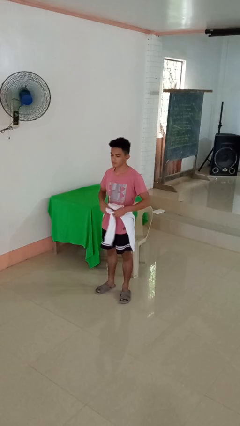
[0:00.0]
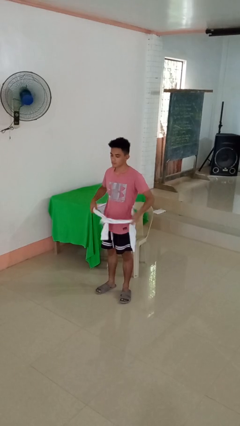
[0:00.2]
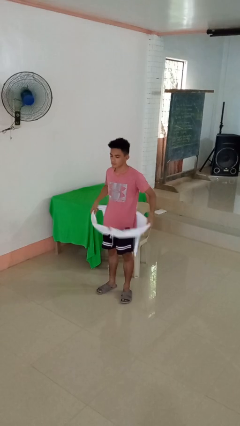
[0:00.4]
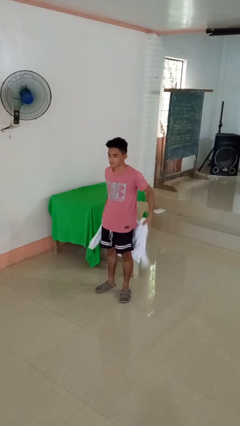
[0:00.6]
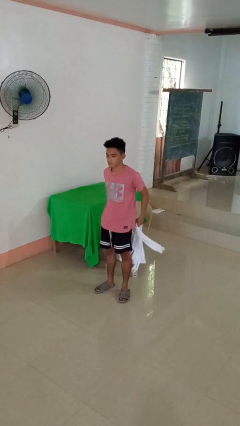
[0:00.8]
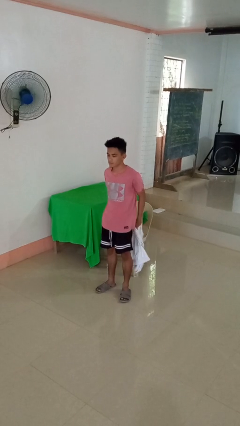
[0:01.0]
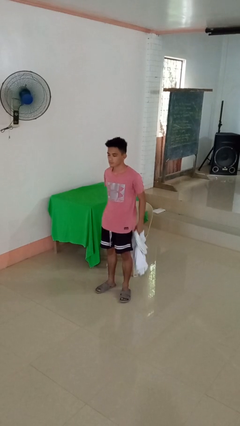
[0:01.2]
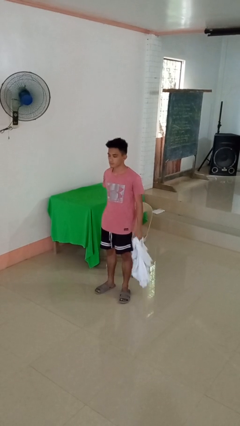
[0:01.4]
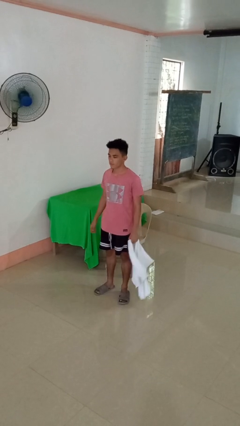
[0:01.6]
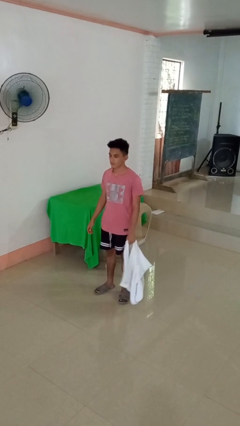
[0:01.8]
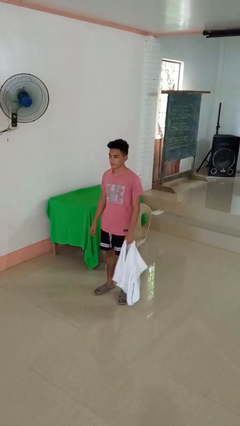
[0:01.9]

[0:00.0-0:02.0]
person unties jacket around waist

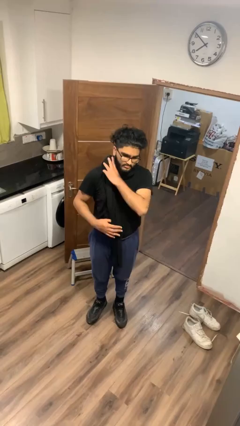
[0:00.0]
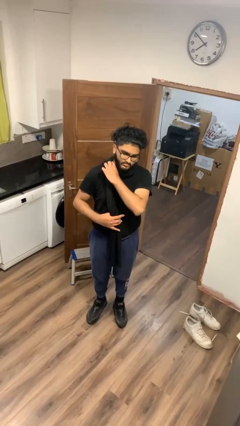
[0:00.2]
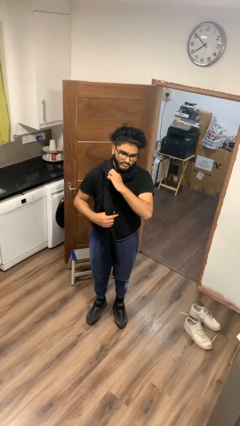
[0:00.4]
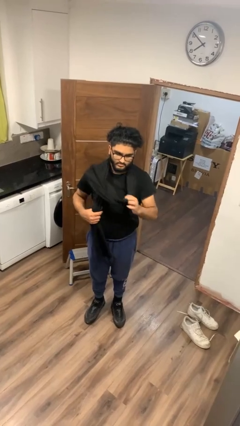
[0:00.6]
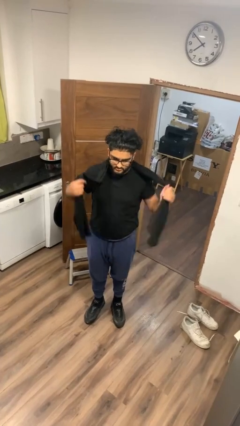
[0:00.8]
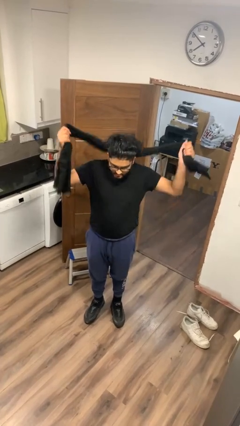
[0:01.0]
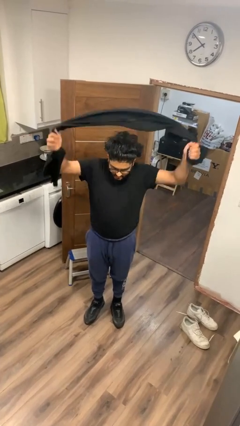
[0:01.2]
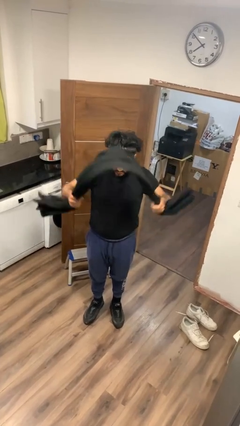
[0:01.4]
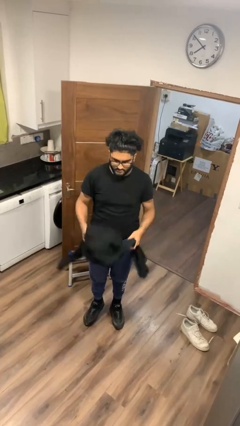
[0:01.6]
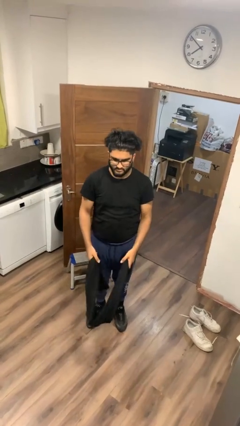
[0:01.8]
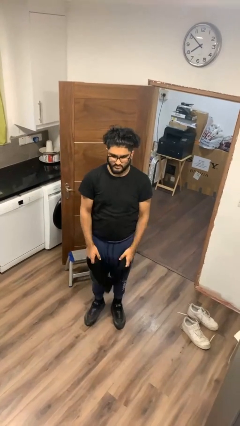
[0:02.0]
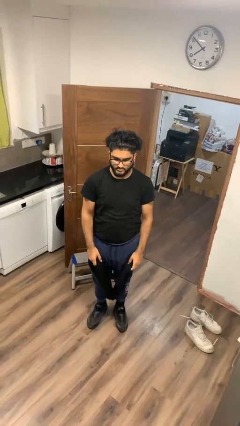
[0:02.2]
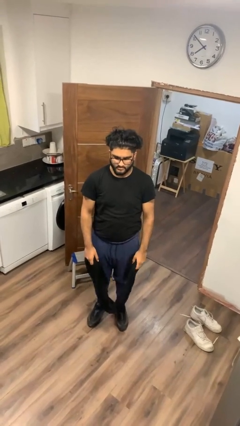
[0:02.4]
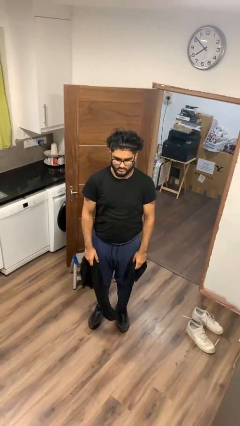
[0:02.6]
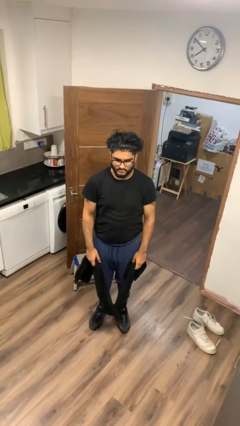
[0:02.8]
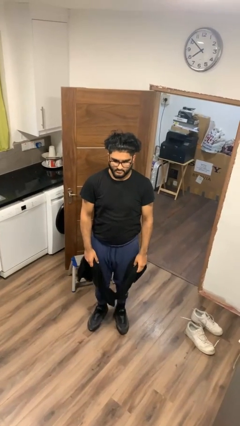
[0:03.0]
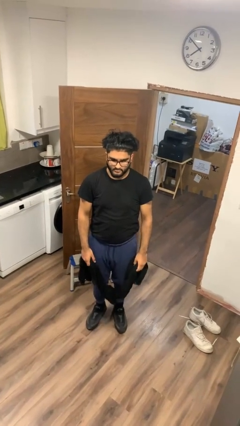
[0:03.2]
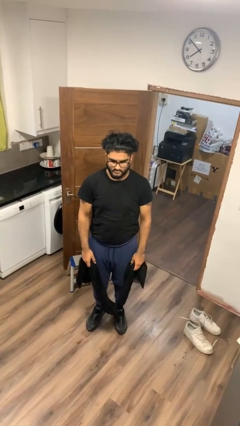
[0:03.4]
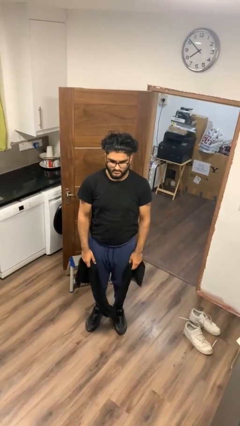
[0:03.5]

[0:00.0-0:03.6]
person takes off scarf

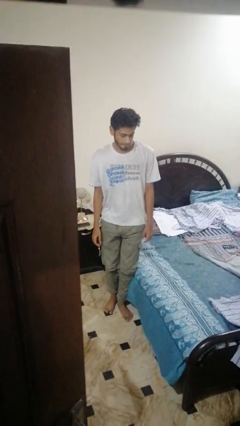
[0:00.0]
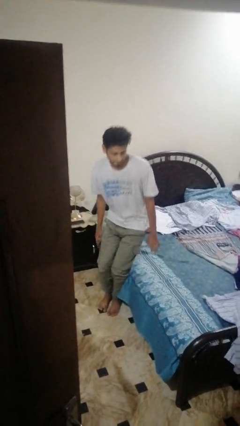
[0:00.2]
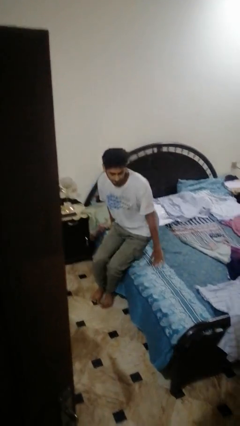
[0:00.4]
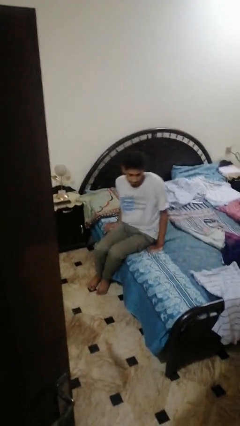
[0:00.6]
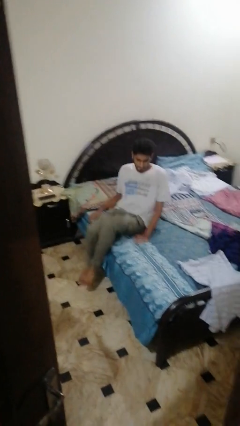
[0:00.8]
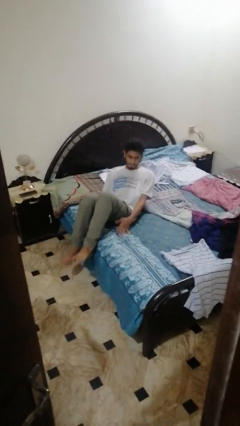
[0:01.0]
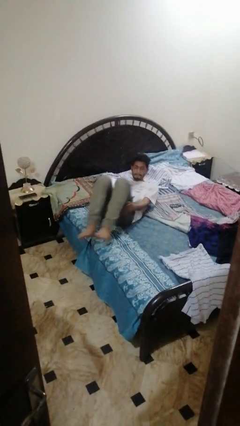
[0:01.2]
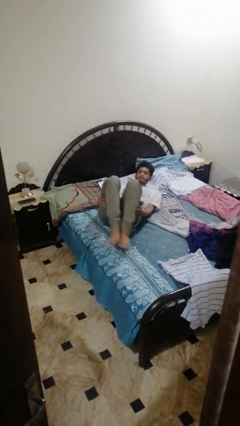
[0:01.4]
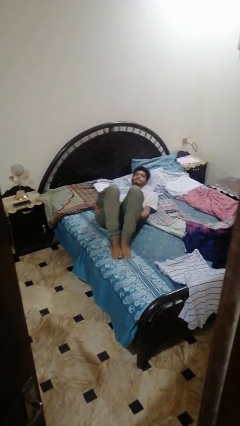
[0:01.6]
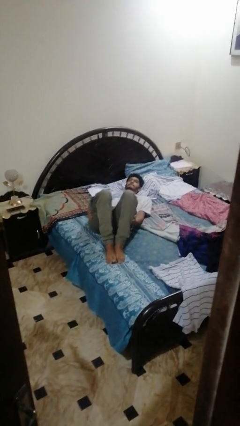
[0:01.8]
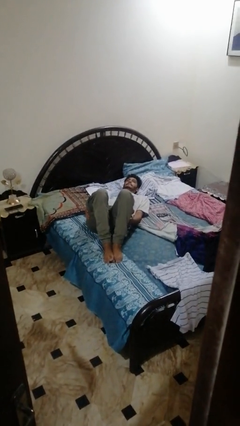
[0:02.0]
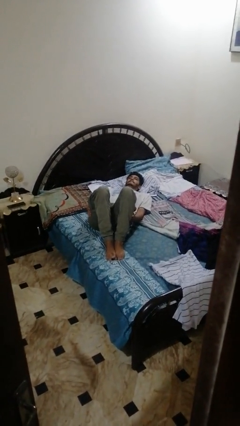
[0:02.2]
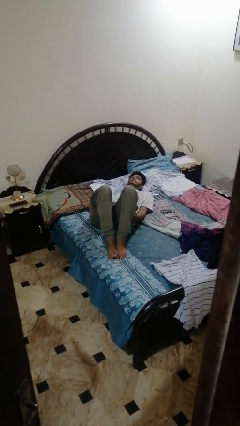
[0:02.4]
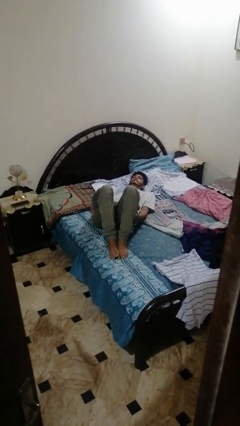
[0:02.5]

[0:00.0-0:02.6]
person lies down on bed

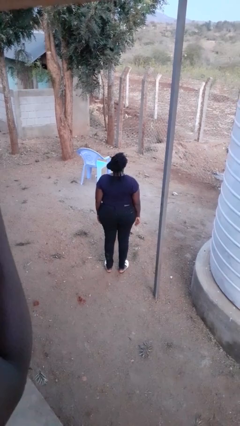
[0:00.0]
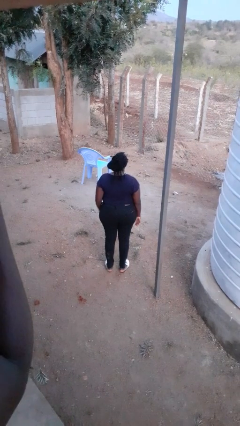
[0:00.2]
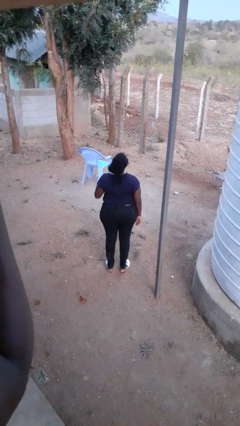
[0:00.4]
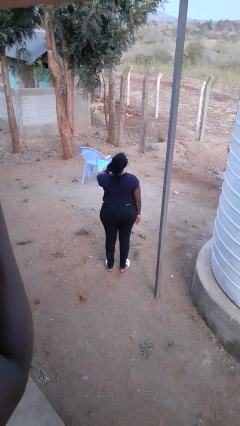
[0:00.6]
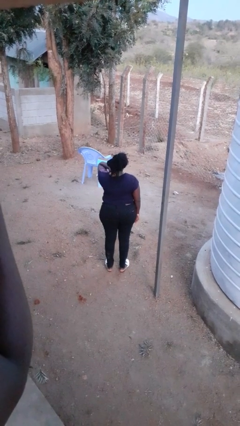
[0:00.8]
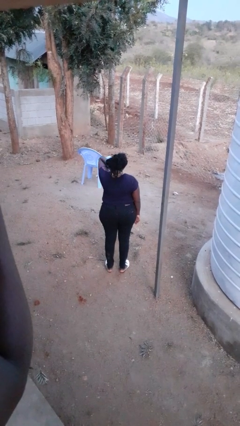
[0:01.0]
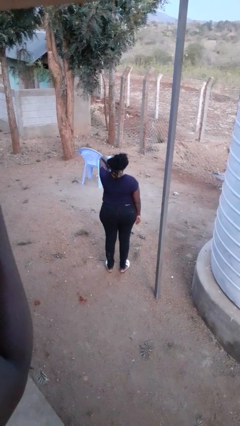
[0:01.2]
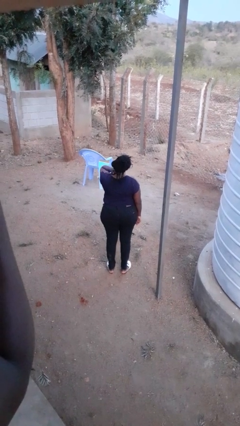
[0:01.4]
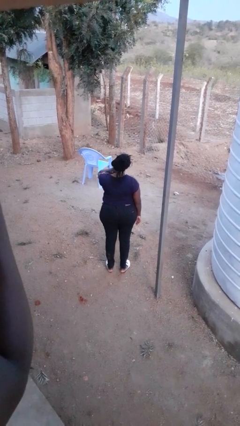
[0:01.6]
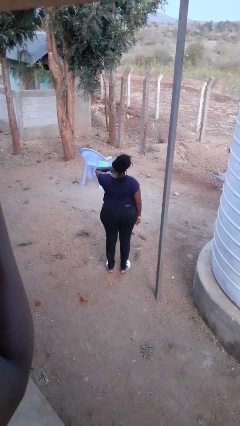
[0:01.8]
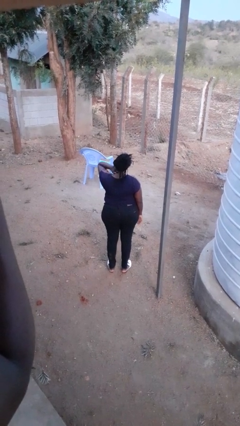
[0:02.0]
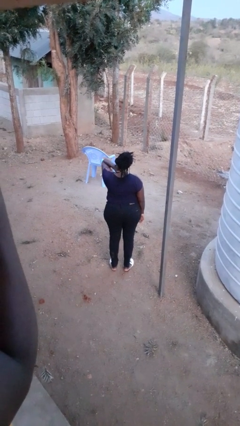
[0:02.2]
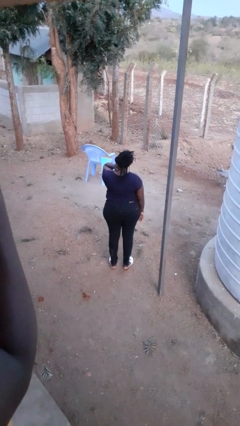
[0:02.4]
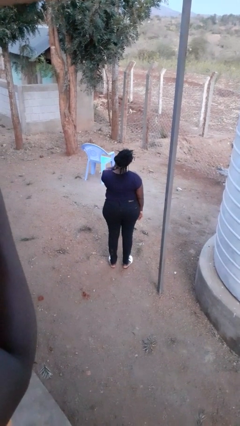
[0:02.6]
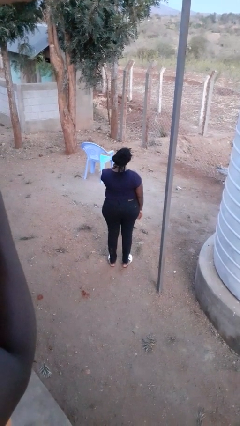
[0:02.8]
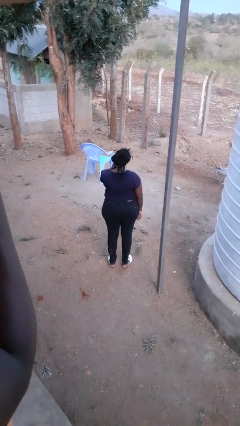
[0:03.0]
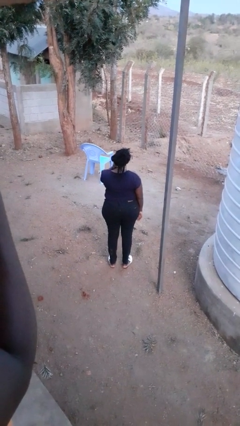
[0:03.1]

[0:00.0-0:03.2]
person rubs neck

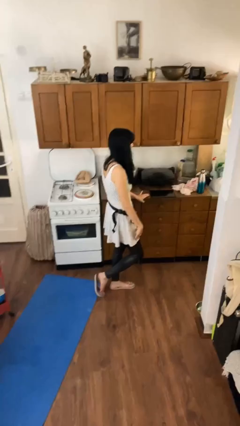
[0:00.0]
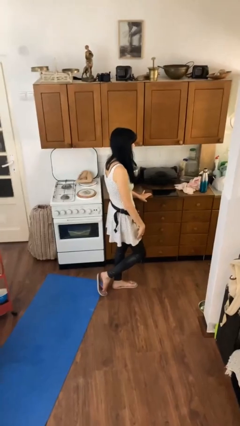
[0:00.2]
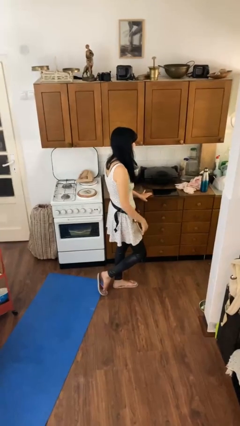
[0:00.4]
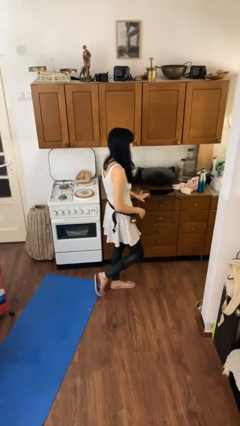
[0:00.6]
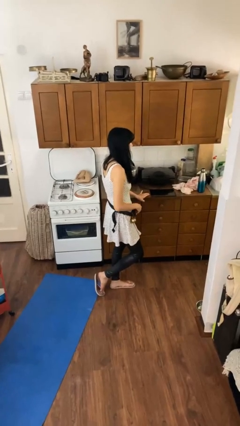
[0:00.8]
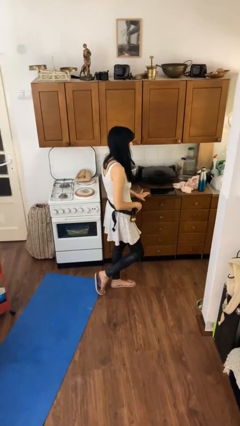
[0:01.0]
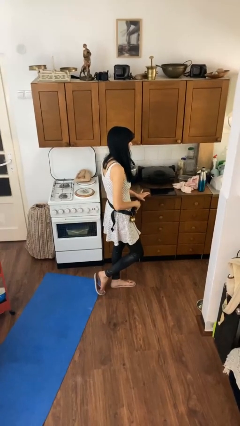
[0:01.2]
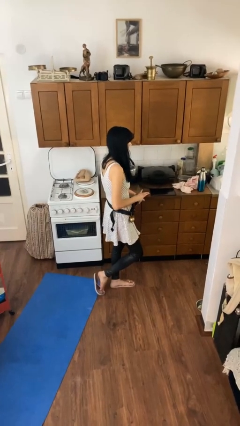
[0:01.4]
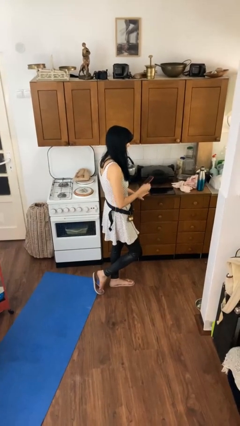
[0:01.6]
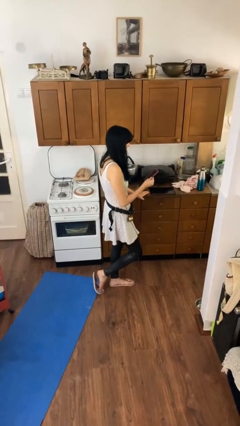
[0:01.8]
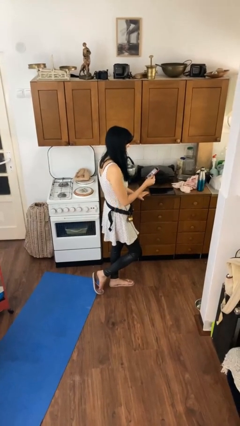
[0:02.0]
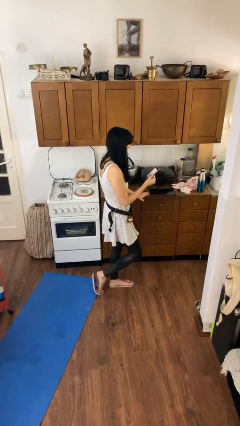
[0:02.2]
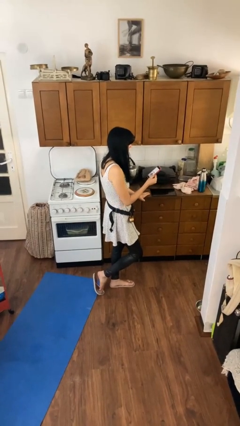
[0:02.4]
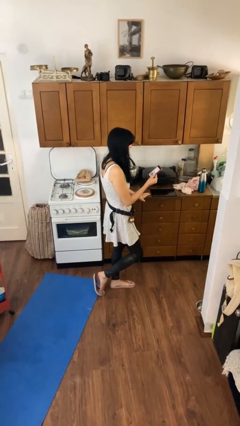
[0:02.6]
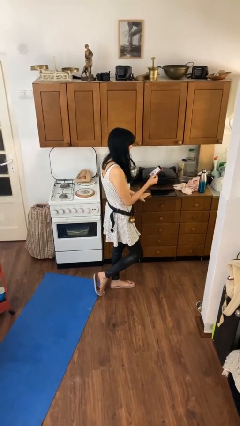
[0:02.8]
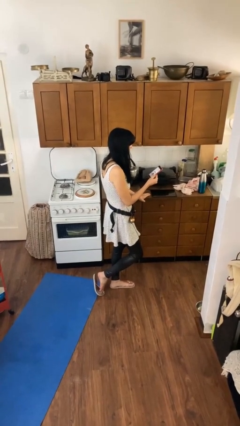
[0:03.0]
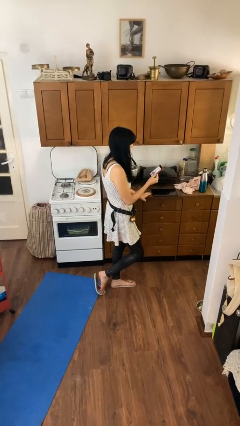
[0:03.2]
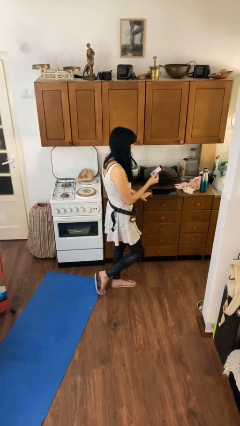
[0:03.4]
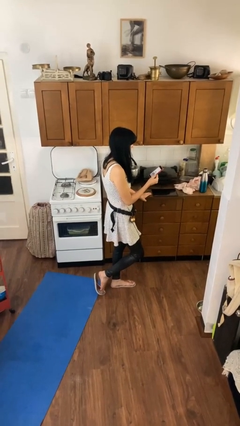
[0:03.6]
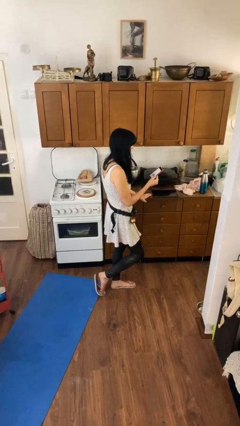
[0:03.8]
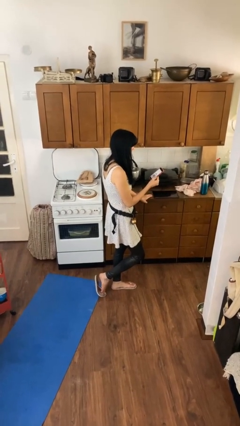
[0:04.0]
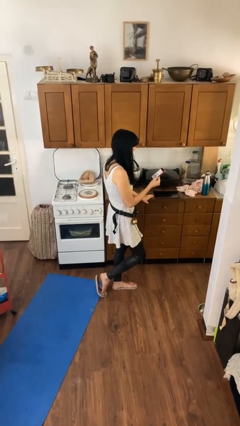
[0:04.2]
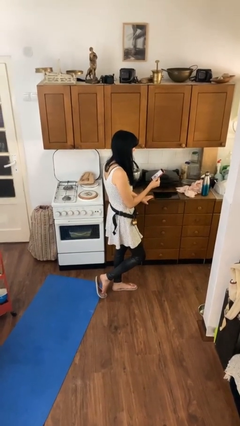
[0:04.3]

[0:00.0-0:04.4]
person takes phone from pocket

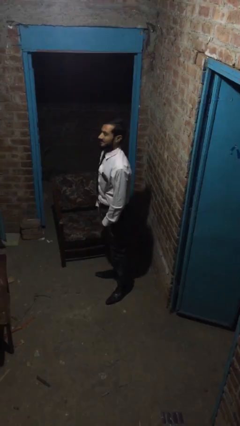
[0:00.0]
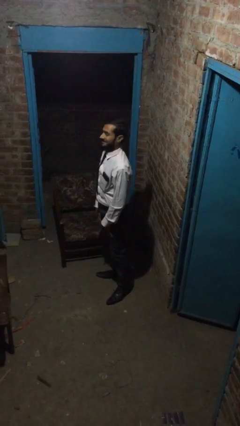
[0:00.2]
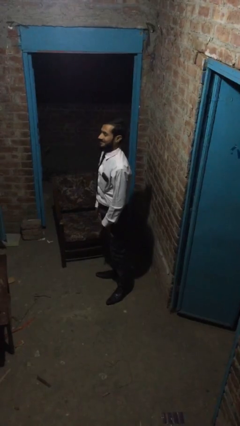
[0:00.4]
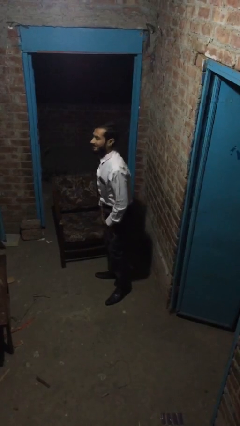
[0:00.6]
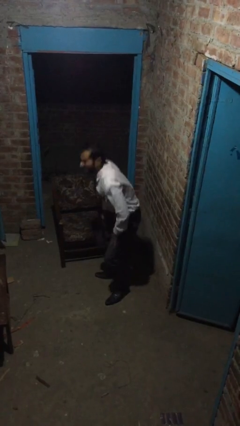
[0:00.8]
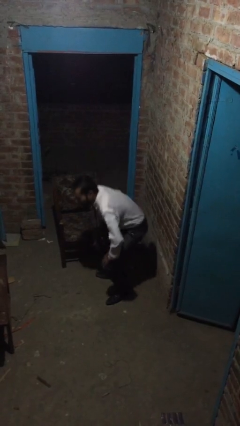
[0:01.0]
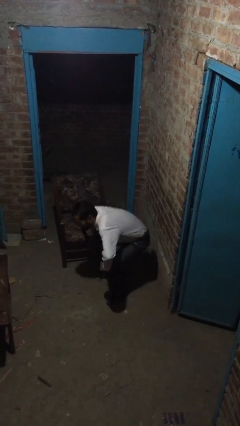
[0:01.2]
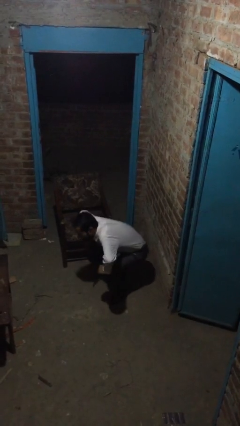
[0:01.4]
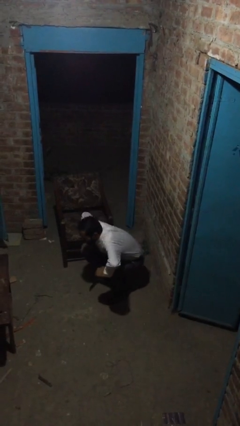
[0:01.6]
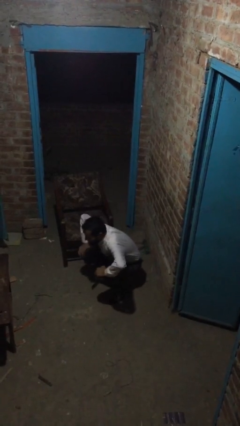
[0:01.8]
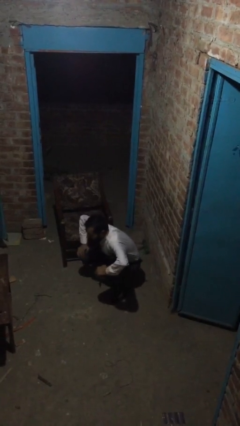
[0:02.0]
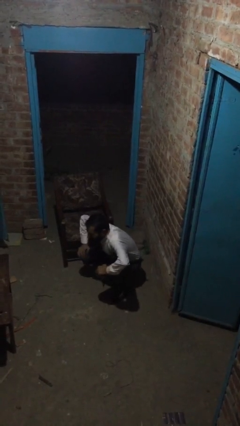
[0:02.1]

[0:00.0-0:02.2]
person sits down
